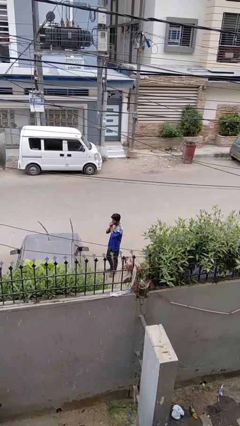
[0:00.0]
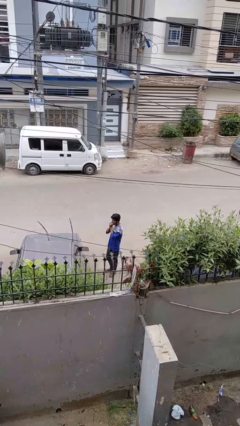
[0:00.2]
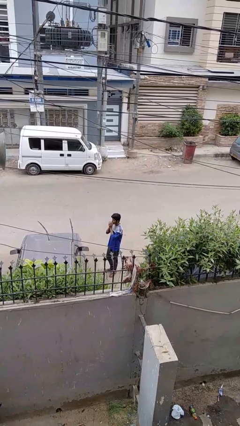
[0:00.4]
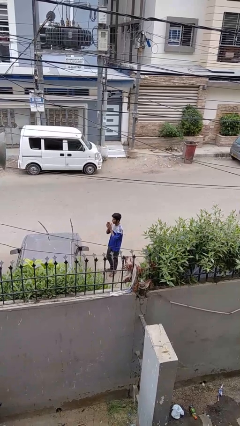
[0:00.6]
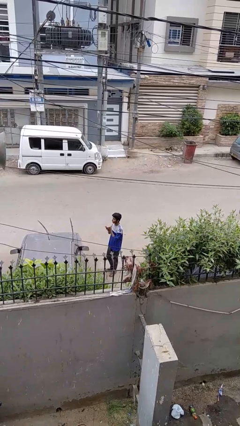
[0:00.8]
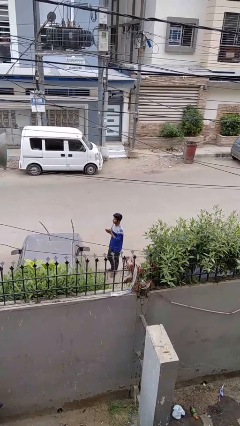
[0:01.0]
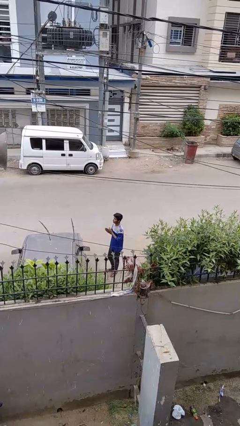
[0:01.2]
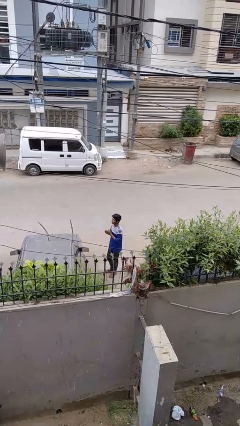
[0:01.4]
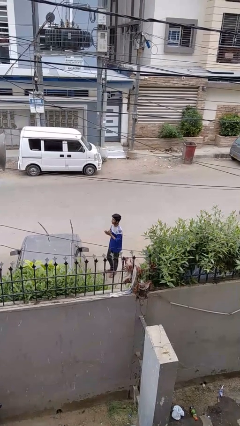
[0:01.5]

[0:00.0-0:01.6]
person blows into hands

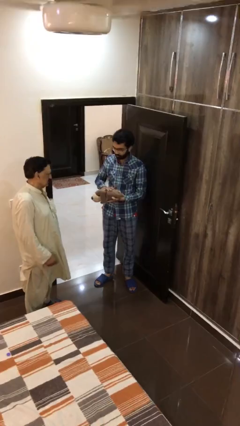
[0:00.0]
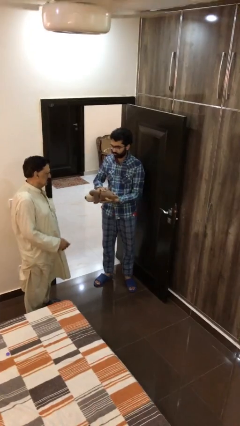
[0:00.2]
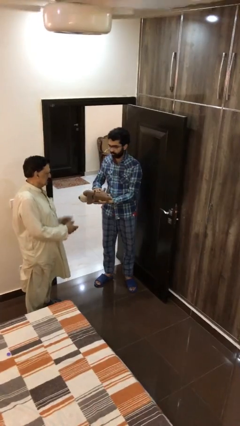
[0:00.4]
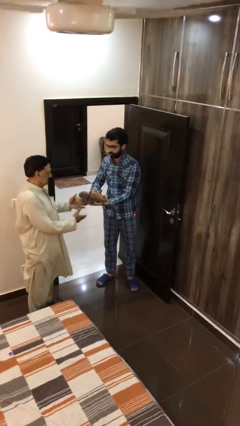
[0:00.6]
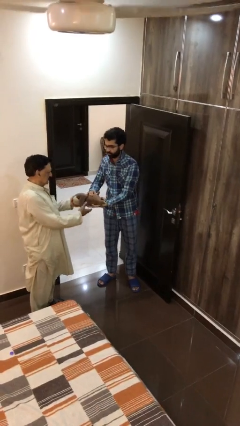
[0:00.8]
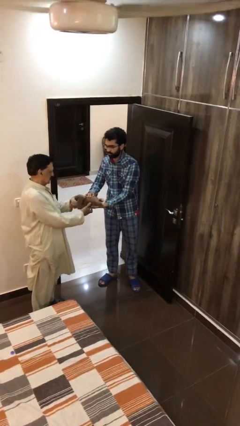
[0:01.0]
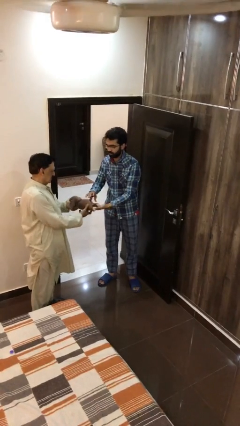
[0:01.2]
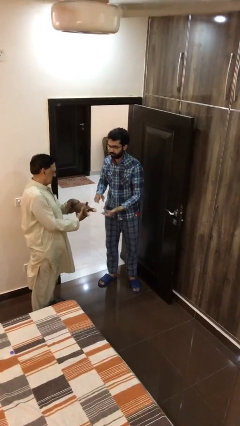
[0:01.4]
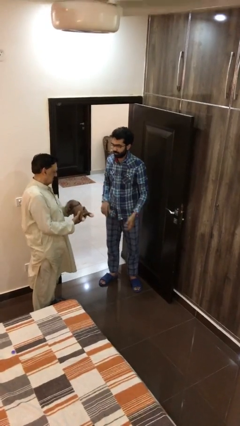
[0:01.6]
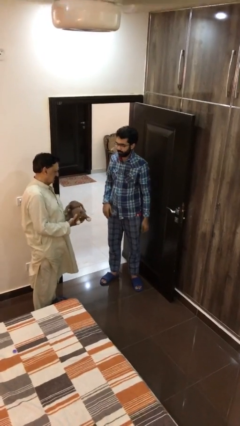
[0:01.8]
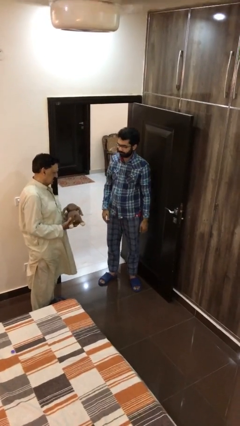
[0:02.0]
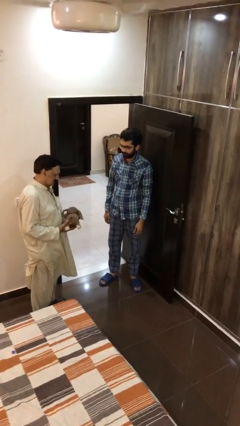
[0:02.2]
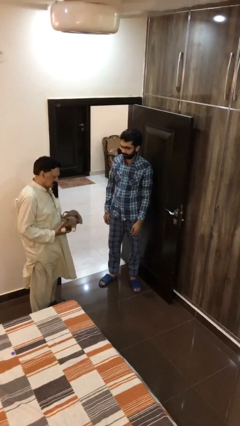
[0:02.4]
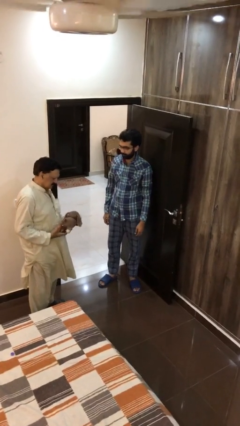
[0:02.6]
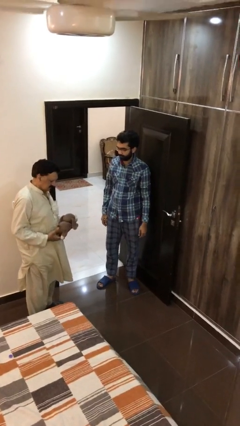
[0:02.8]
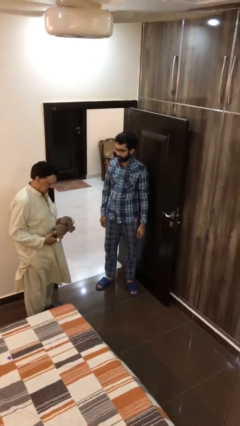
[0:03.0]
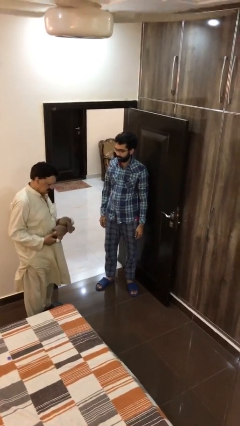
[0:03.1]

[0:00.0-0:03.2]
person transfers object to person

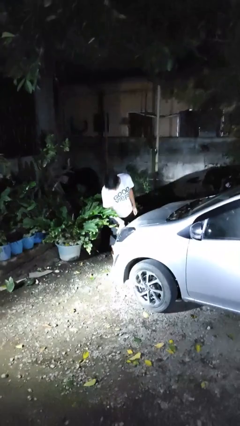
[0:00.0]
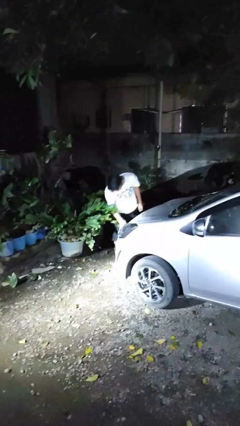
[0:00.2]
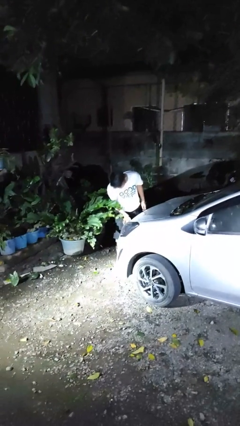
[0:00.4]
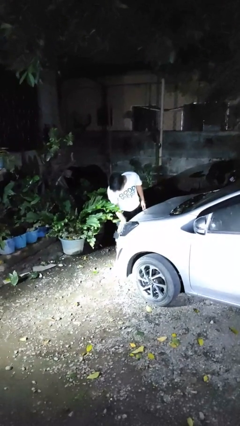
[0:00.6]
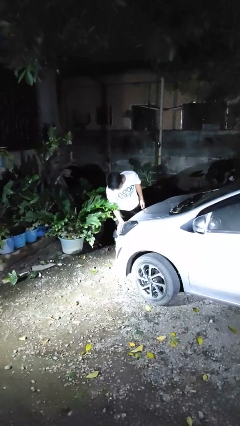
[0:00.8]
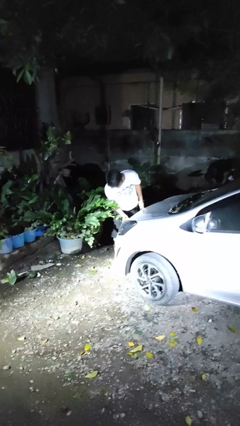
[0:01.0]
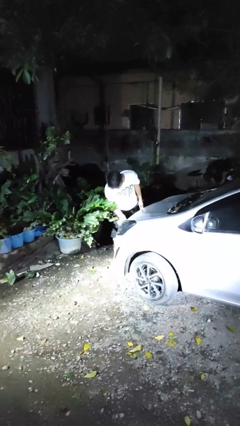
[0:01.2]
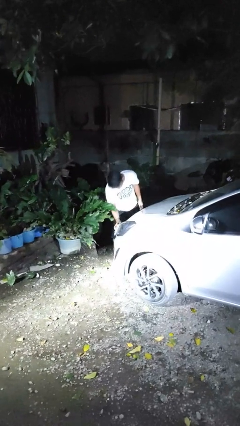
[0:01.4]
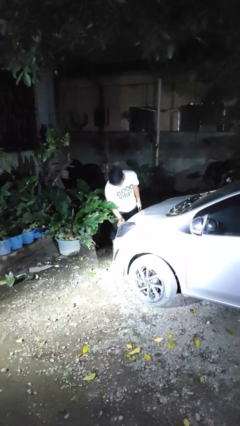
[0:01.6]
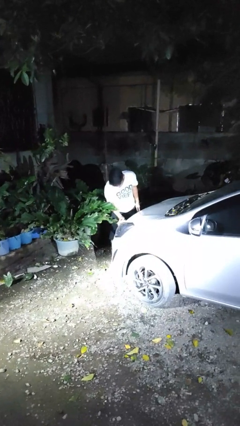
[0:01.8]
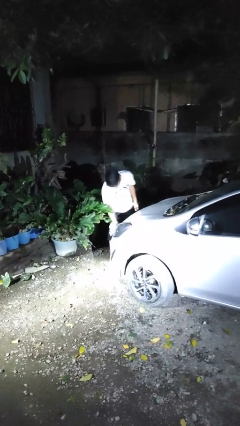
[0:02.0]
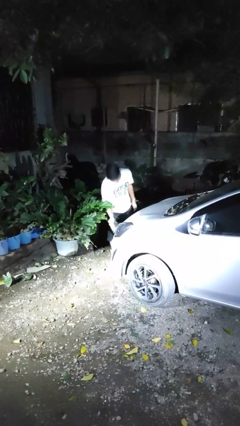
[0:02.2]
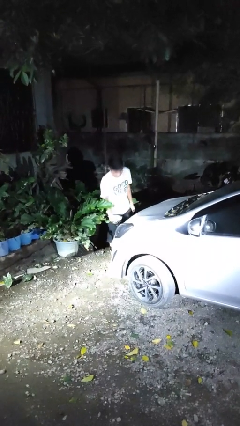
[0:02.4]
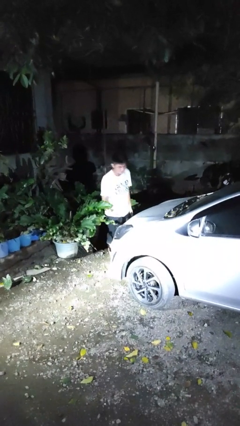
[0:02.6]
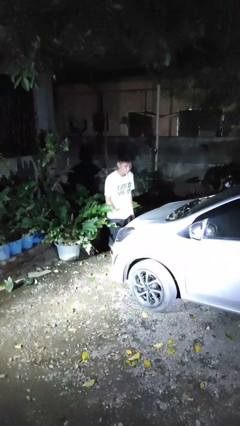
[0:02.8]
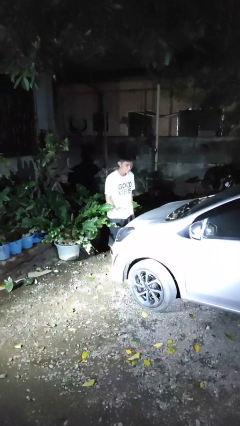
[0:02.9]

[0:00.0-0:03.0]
person polishes car with rag

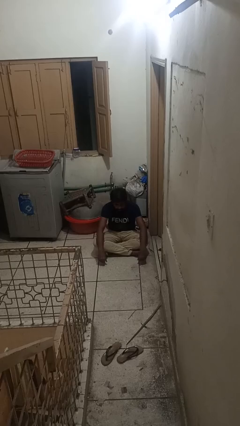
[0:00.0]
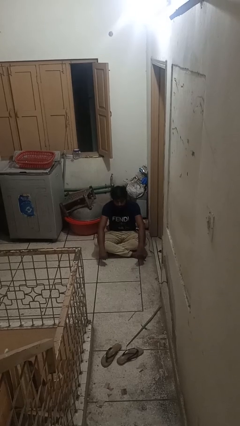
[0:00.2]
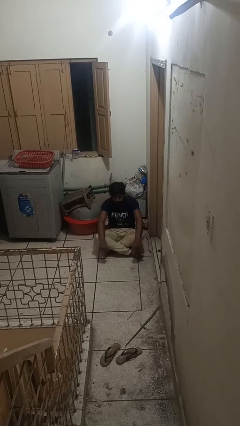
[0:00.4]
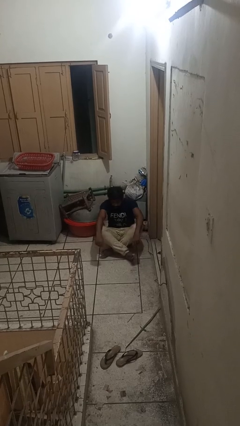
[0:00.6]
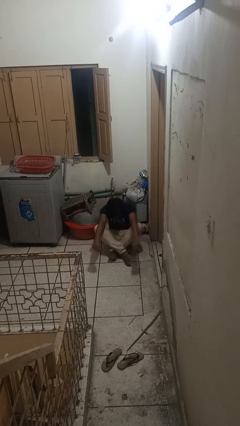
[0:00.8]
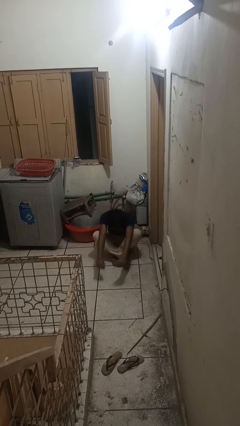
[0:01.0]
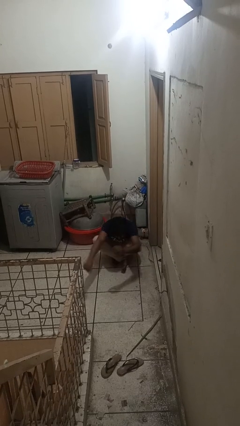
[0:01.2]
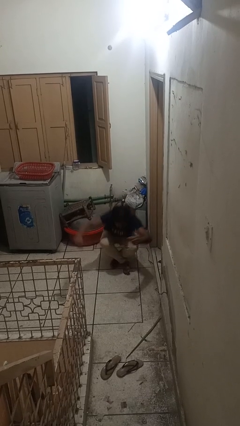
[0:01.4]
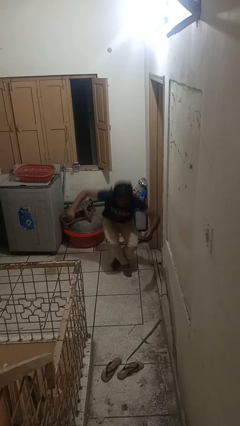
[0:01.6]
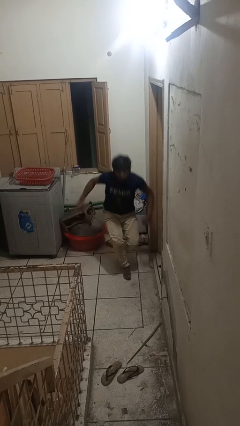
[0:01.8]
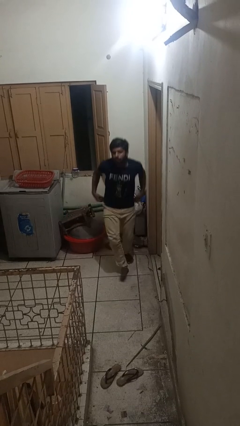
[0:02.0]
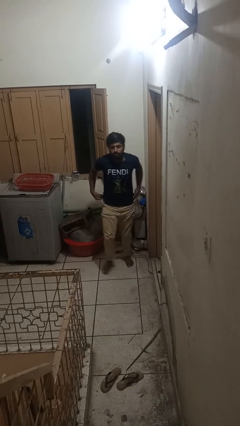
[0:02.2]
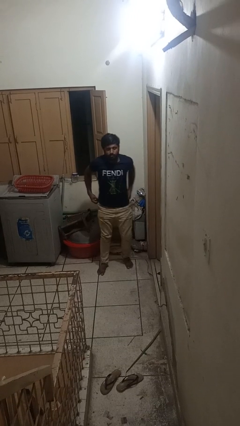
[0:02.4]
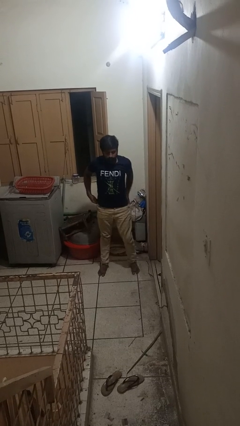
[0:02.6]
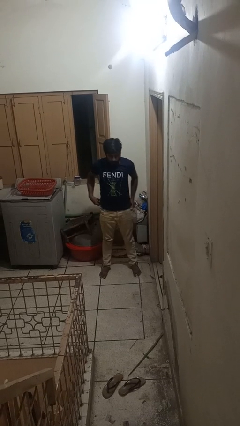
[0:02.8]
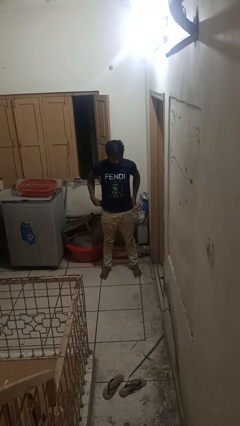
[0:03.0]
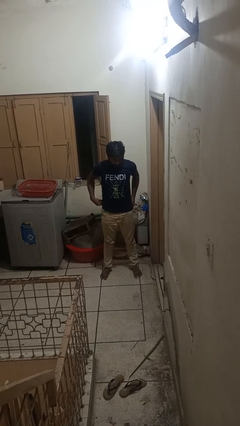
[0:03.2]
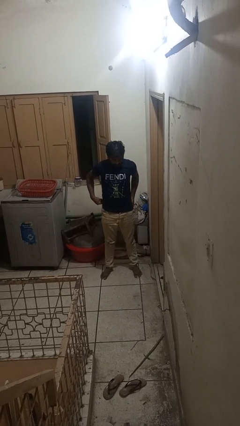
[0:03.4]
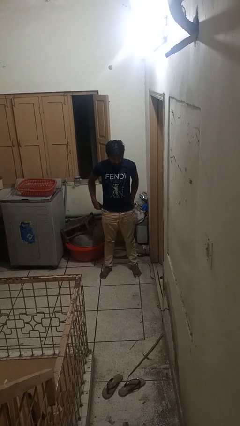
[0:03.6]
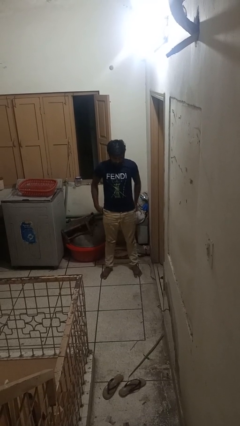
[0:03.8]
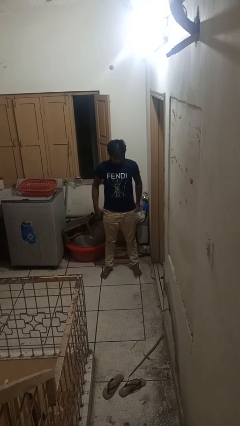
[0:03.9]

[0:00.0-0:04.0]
person stands up from floor

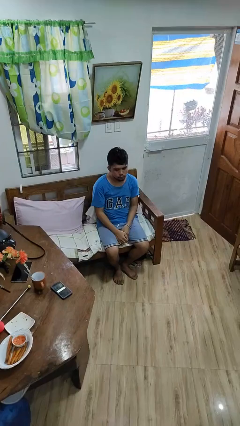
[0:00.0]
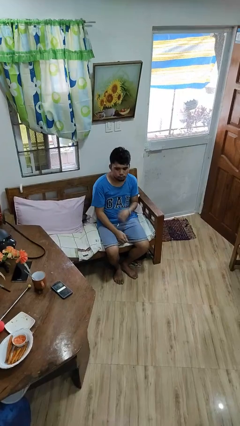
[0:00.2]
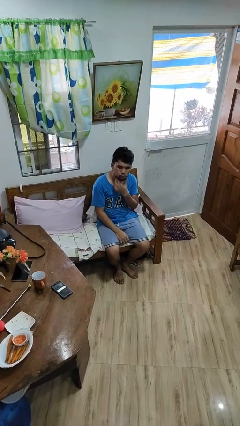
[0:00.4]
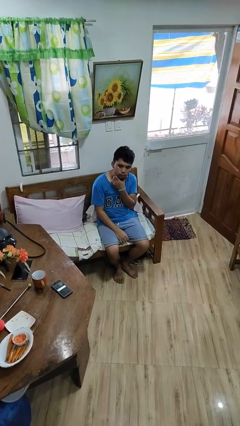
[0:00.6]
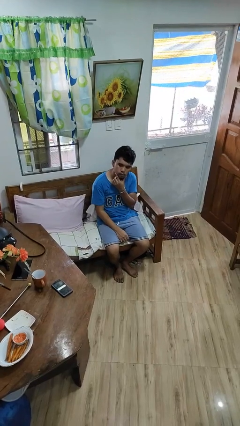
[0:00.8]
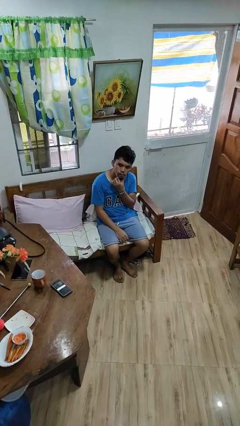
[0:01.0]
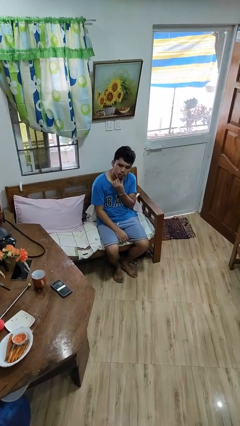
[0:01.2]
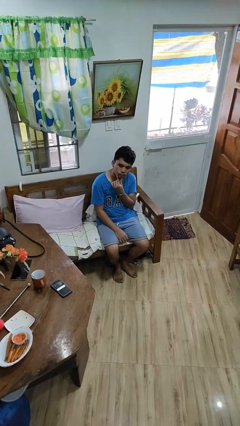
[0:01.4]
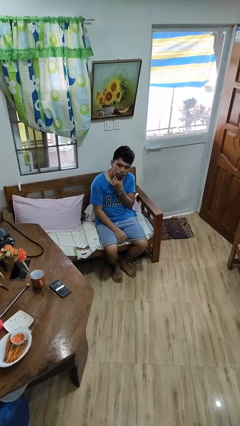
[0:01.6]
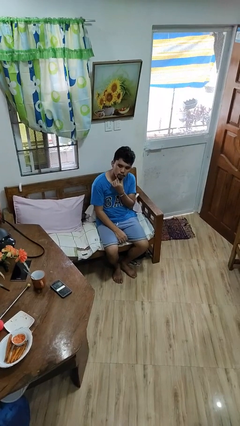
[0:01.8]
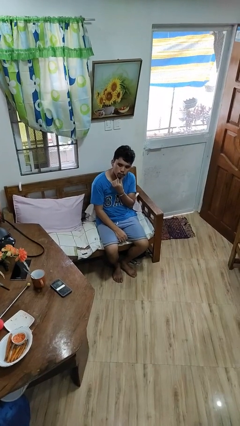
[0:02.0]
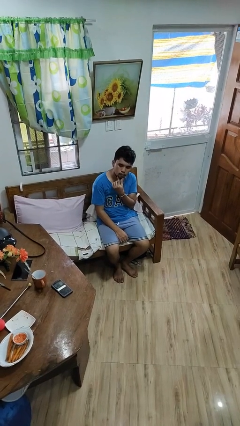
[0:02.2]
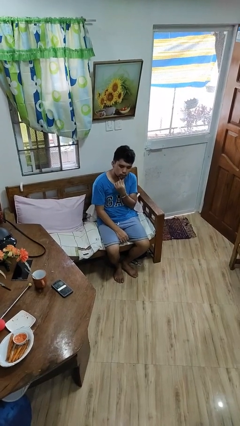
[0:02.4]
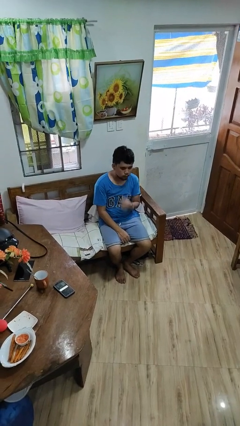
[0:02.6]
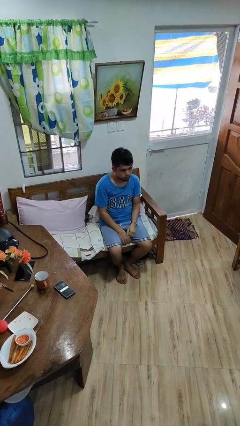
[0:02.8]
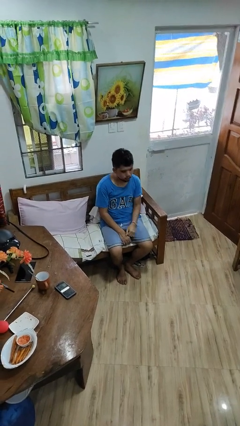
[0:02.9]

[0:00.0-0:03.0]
person strokes chin

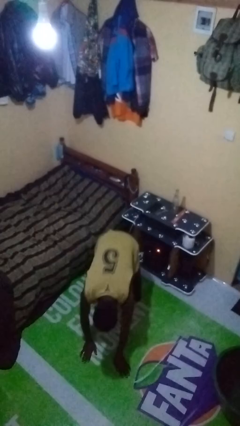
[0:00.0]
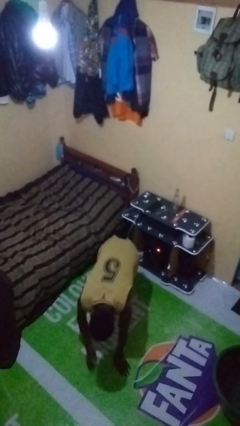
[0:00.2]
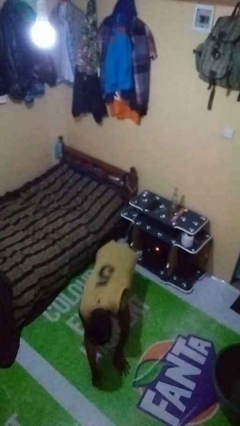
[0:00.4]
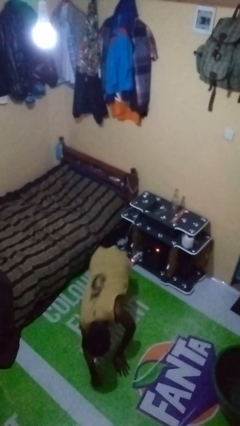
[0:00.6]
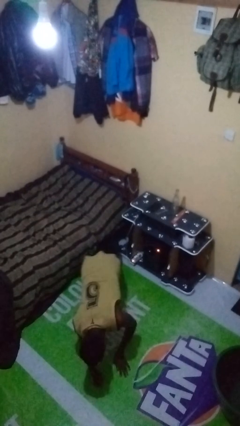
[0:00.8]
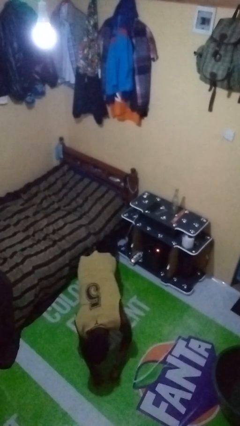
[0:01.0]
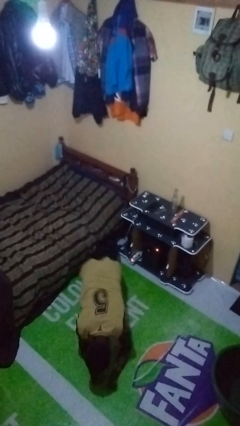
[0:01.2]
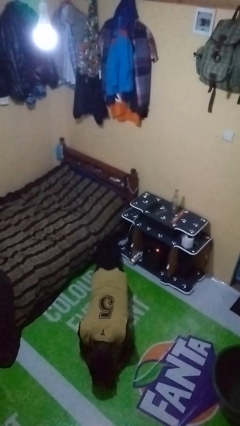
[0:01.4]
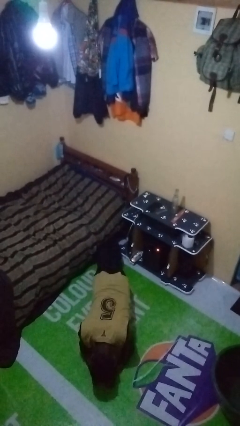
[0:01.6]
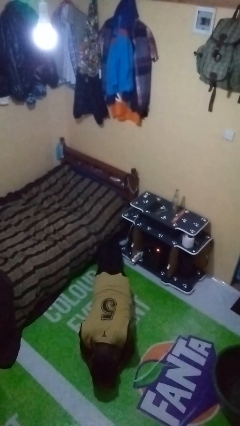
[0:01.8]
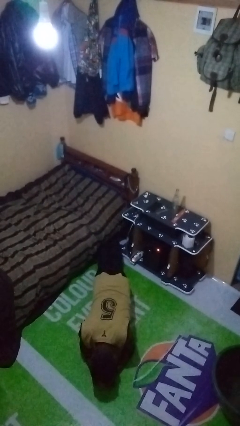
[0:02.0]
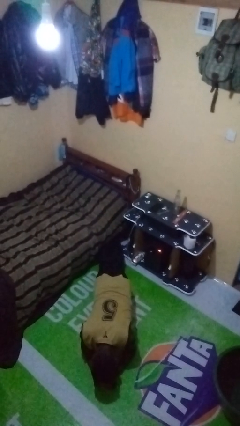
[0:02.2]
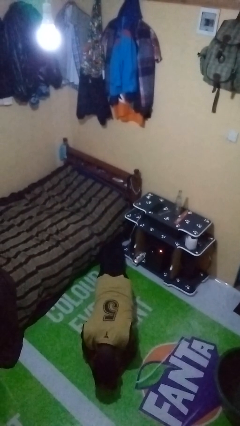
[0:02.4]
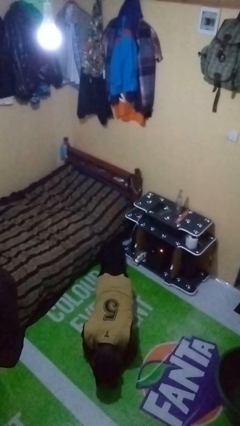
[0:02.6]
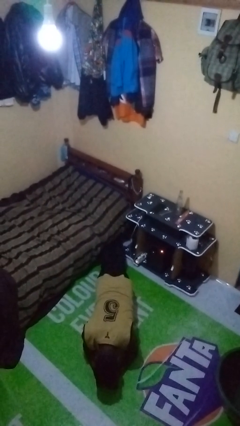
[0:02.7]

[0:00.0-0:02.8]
person exercises with plank
